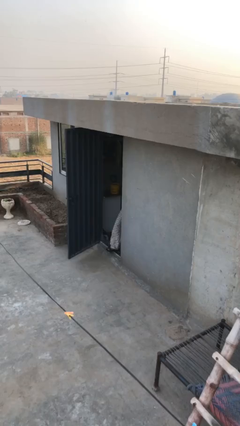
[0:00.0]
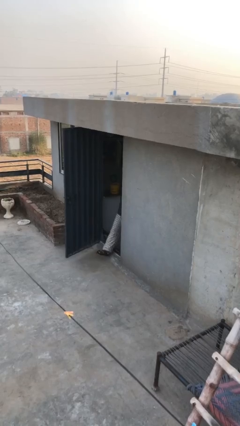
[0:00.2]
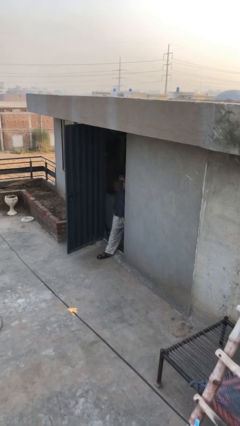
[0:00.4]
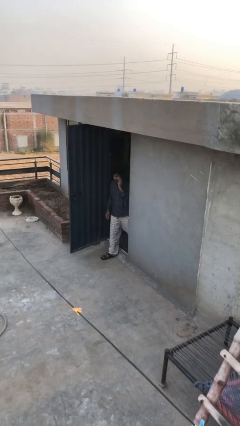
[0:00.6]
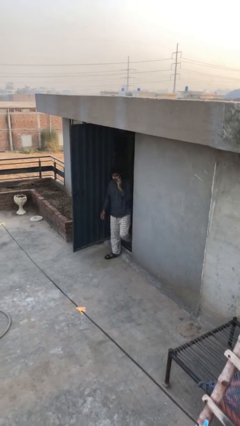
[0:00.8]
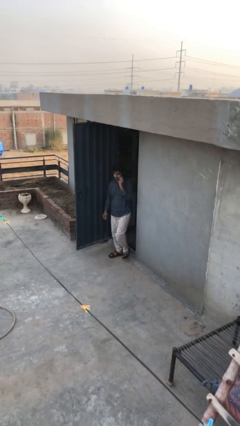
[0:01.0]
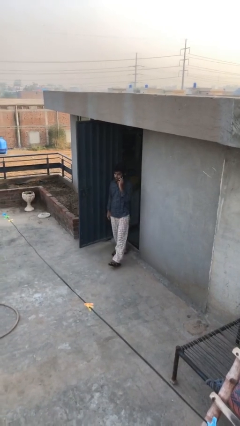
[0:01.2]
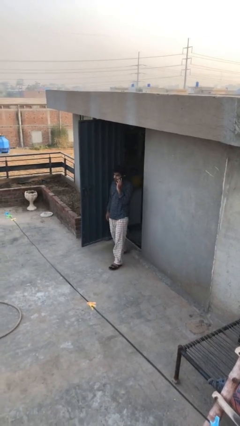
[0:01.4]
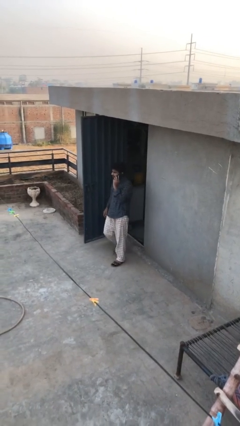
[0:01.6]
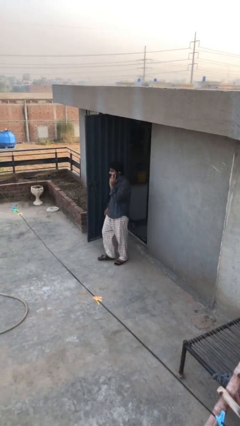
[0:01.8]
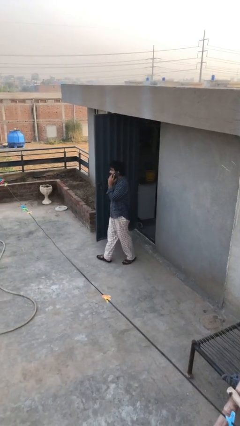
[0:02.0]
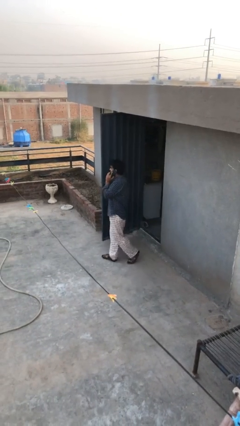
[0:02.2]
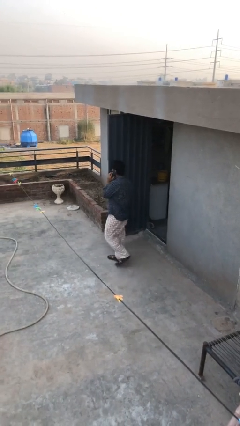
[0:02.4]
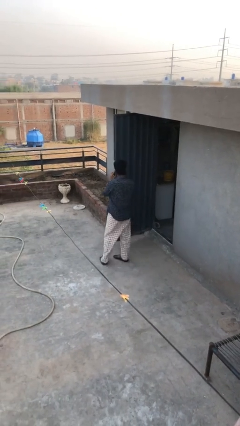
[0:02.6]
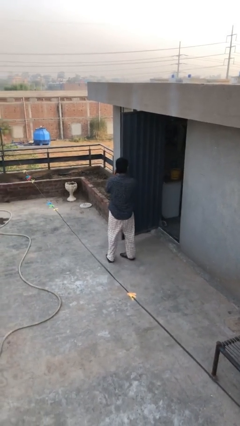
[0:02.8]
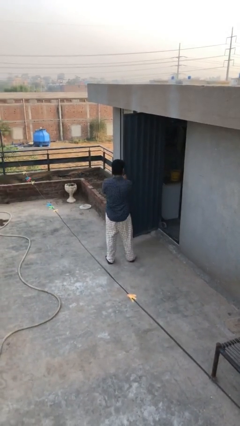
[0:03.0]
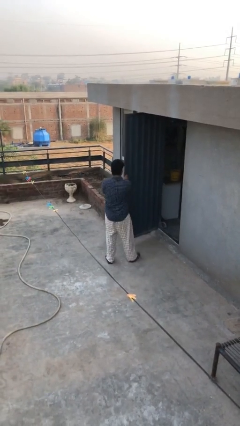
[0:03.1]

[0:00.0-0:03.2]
person enters scene through structure

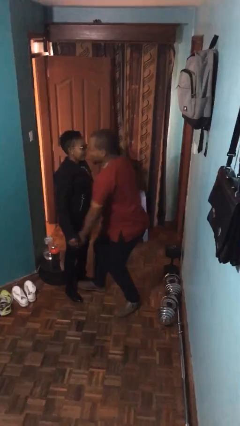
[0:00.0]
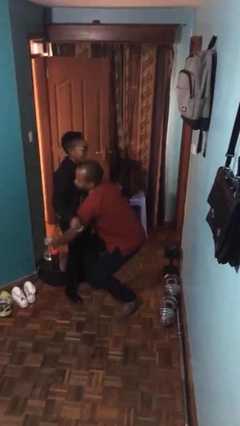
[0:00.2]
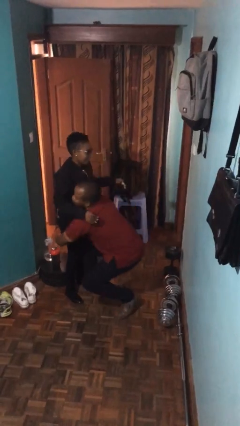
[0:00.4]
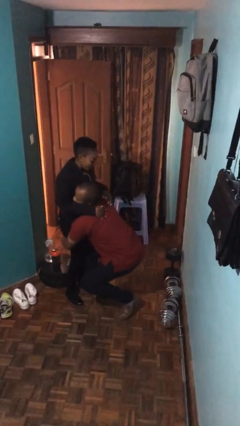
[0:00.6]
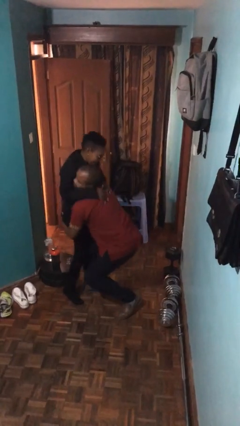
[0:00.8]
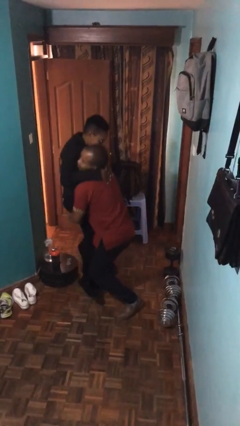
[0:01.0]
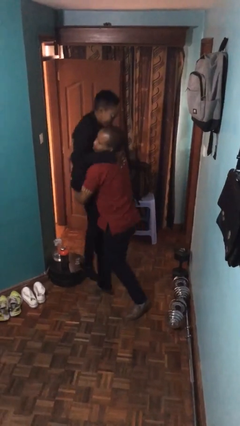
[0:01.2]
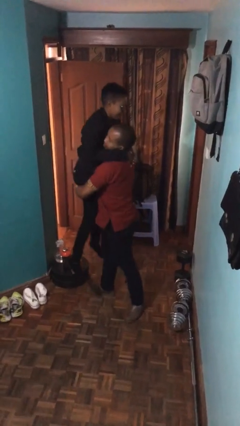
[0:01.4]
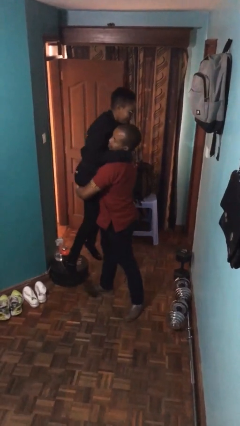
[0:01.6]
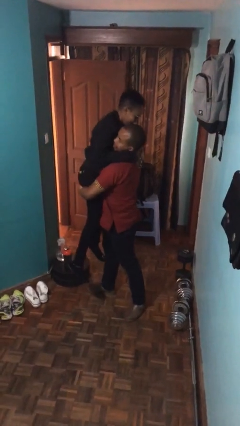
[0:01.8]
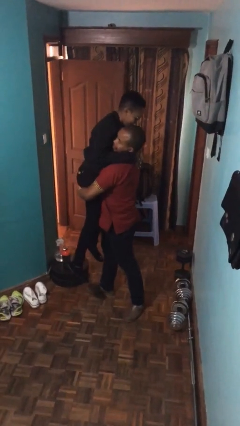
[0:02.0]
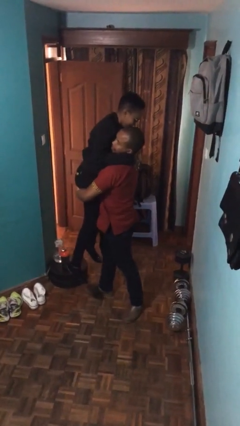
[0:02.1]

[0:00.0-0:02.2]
person picks up person

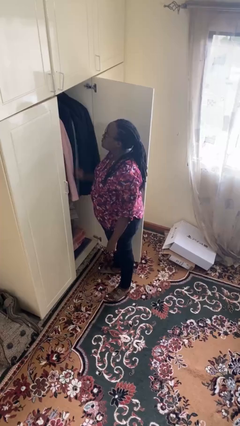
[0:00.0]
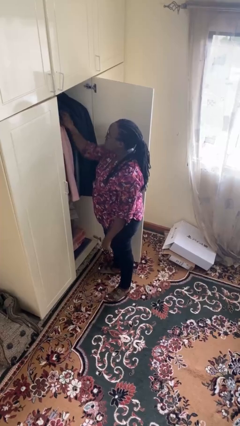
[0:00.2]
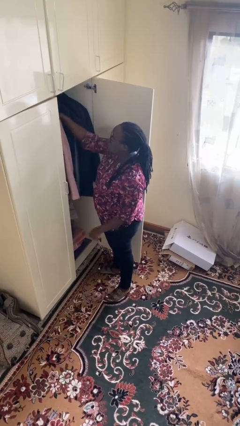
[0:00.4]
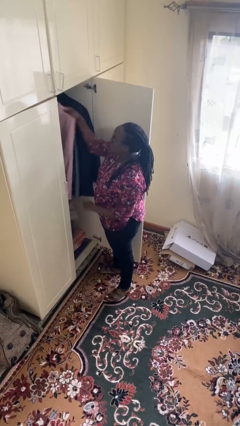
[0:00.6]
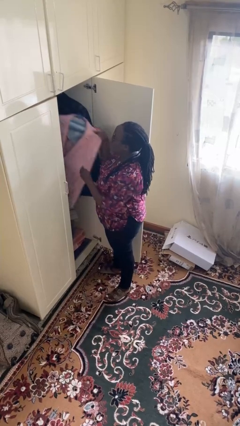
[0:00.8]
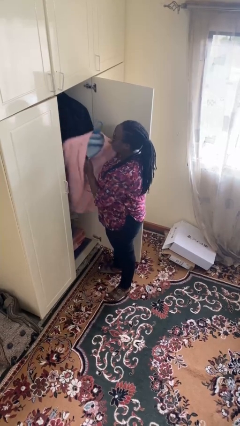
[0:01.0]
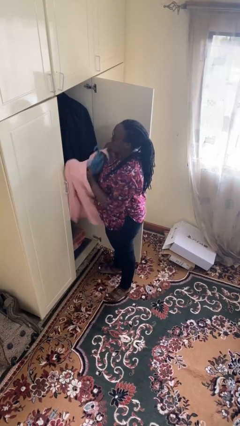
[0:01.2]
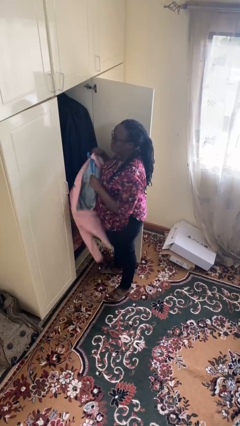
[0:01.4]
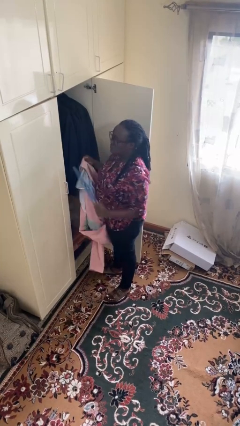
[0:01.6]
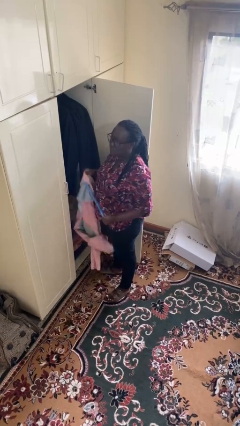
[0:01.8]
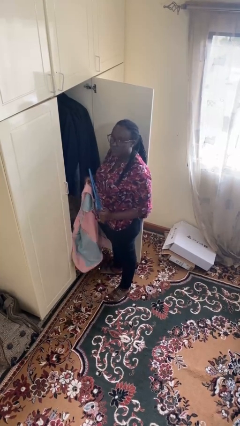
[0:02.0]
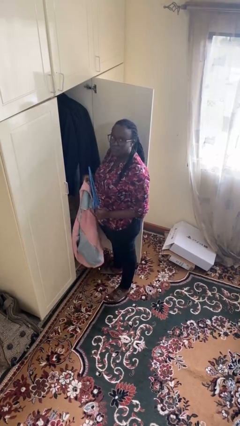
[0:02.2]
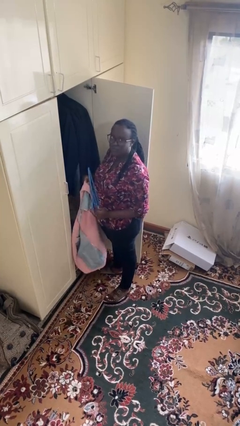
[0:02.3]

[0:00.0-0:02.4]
person takes clothes from closet

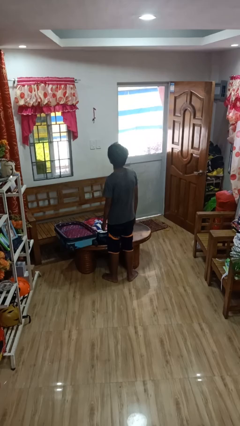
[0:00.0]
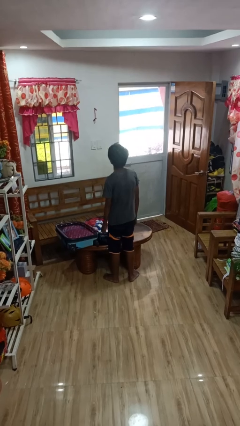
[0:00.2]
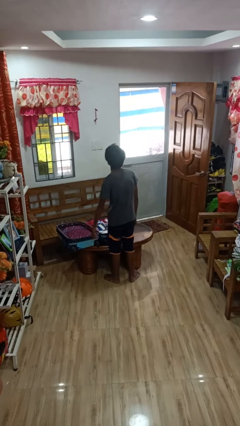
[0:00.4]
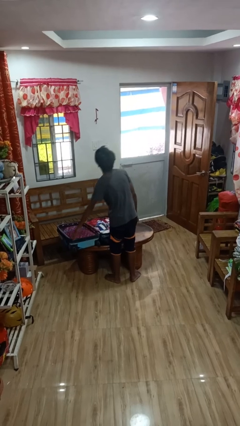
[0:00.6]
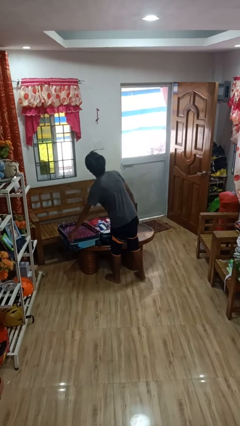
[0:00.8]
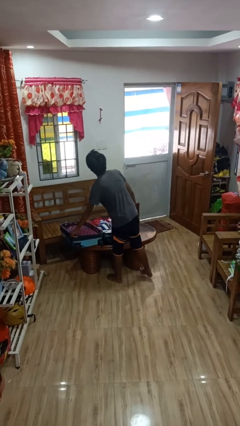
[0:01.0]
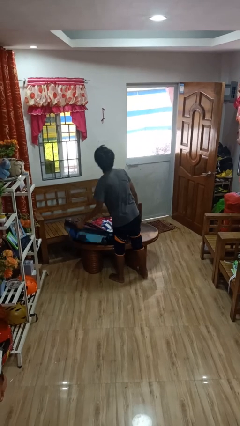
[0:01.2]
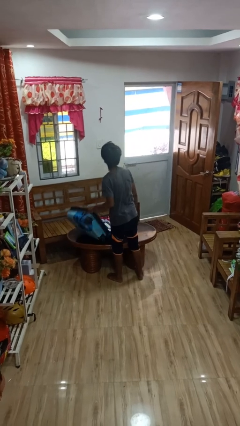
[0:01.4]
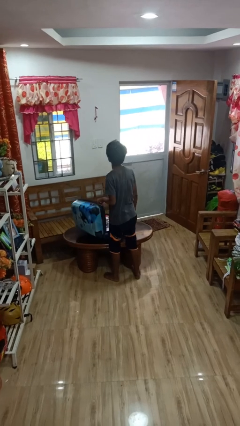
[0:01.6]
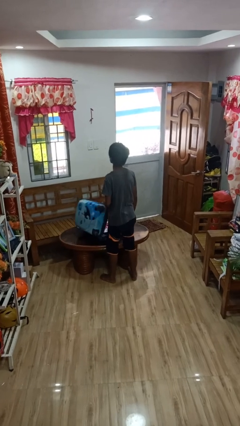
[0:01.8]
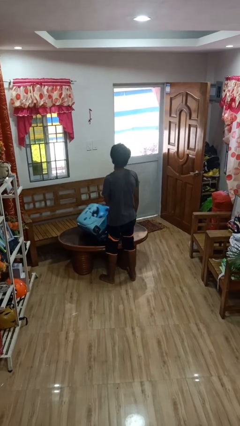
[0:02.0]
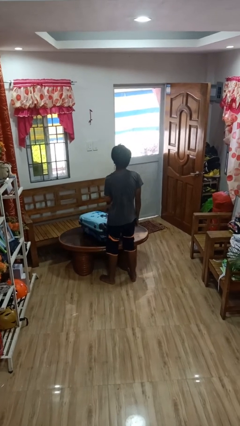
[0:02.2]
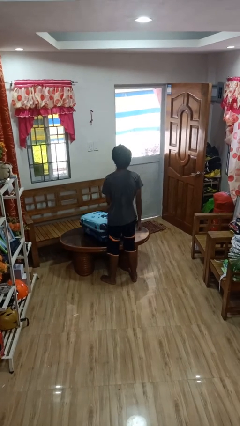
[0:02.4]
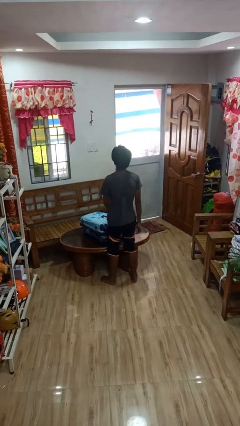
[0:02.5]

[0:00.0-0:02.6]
person closes suitcase

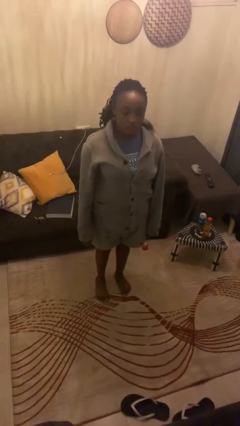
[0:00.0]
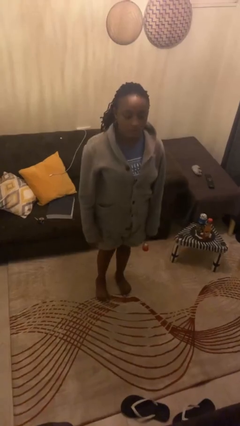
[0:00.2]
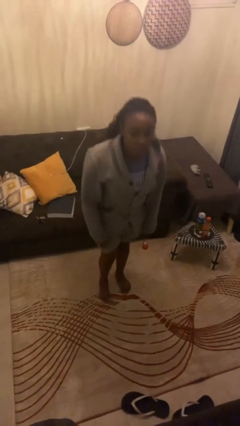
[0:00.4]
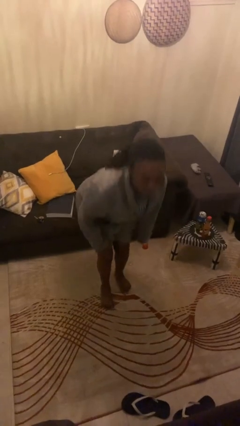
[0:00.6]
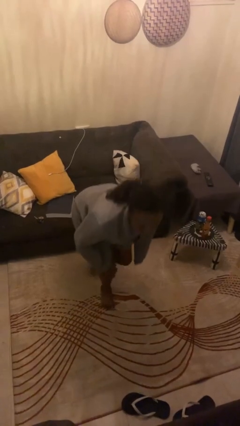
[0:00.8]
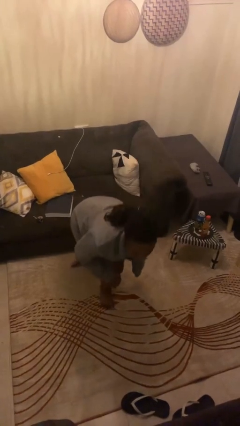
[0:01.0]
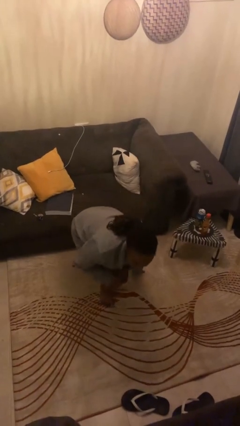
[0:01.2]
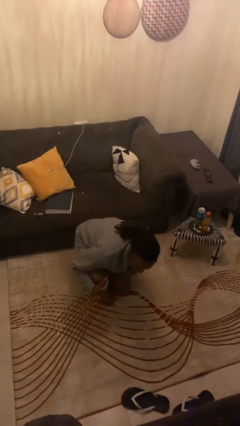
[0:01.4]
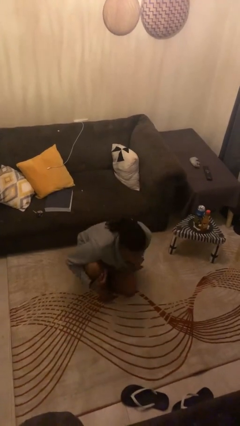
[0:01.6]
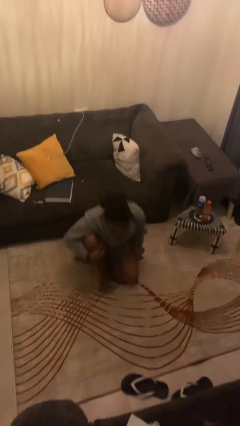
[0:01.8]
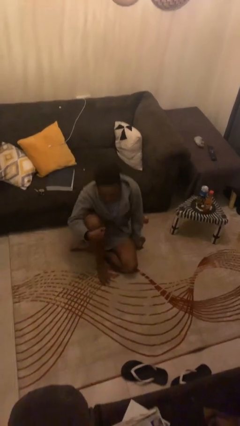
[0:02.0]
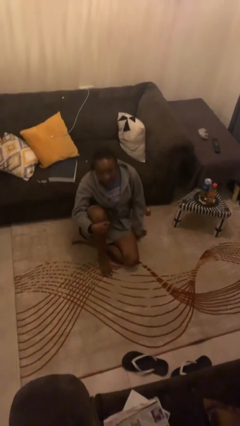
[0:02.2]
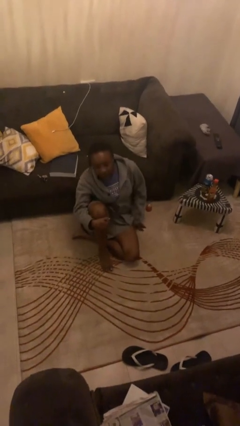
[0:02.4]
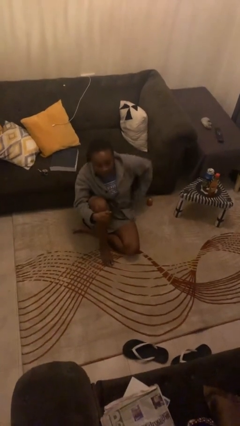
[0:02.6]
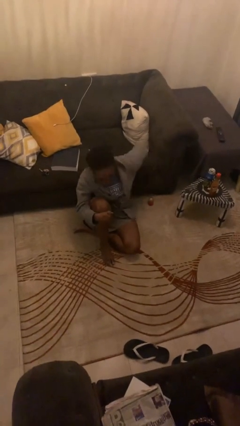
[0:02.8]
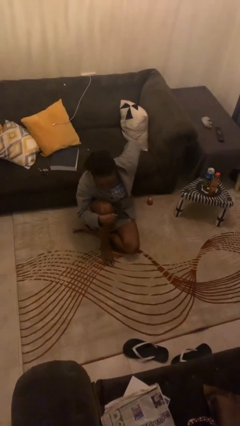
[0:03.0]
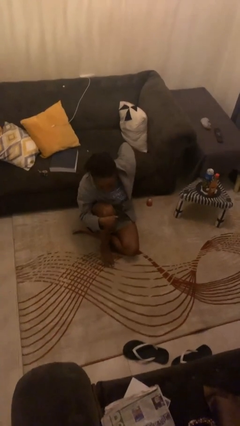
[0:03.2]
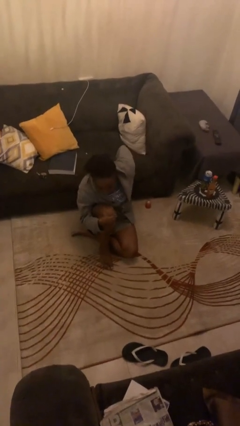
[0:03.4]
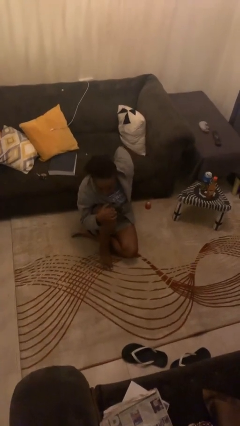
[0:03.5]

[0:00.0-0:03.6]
person sits crisscross

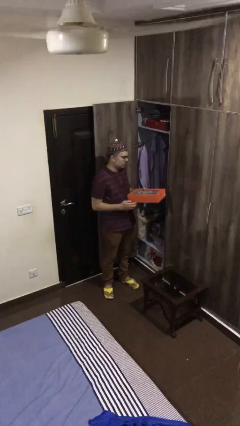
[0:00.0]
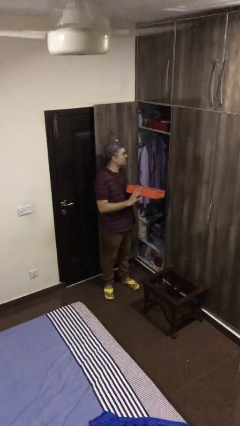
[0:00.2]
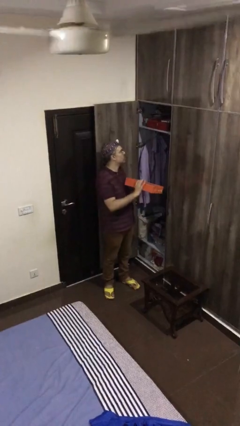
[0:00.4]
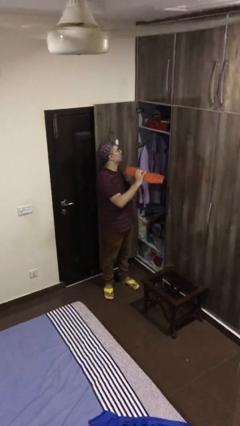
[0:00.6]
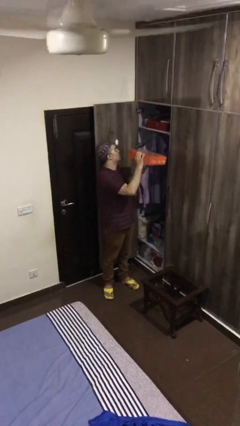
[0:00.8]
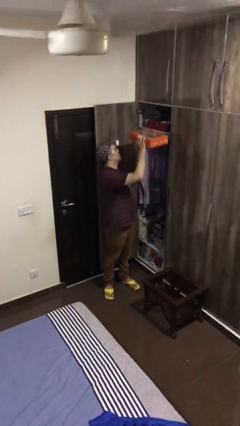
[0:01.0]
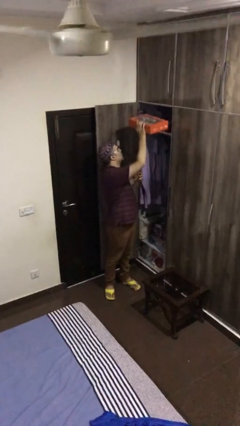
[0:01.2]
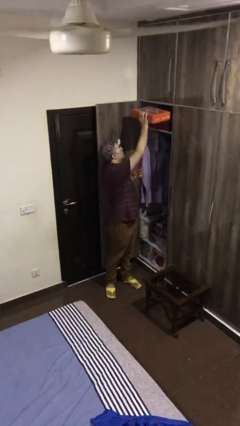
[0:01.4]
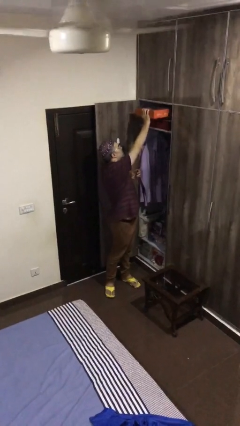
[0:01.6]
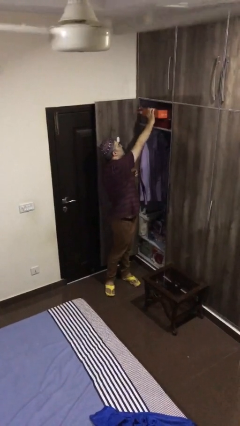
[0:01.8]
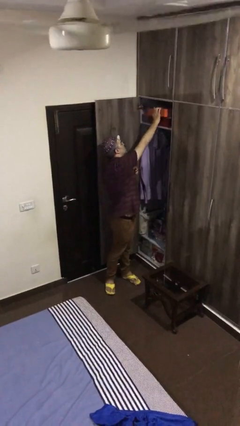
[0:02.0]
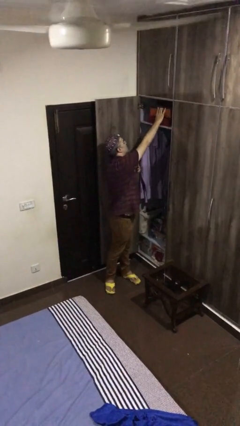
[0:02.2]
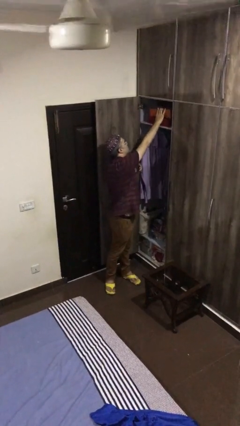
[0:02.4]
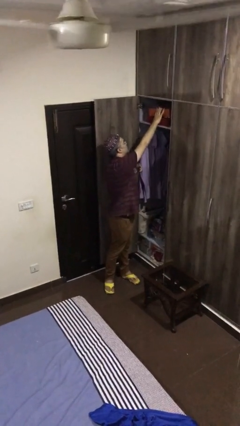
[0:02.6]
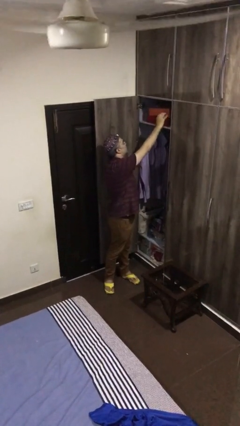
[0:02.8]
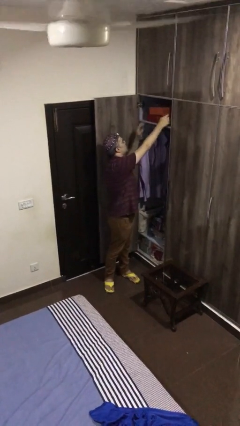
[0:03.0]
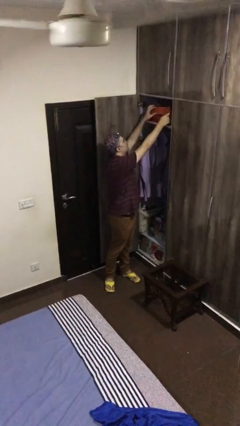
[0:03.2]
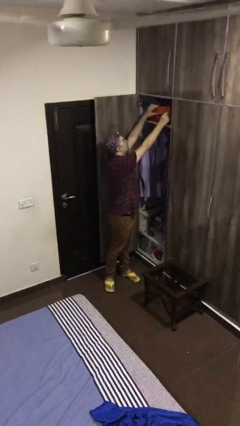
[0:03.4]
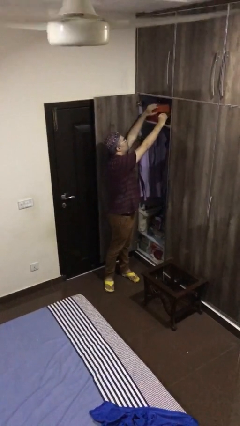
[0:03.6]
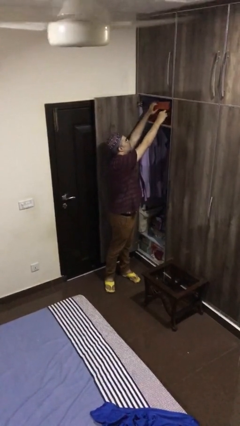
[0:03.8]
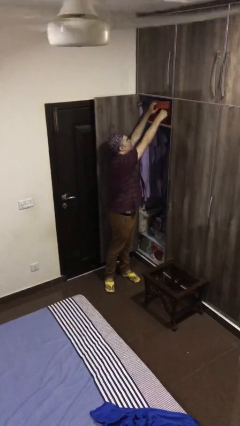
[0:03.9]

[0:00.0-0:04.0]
person puts down object on shelf
